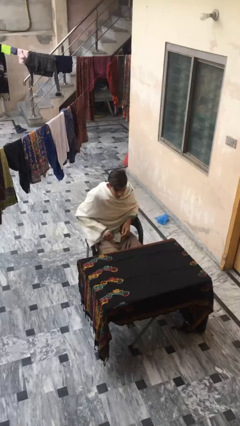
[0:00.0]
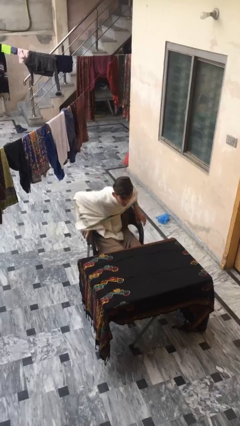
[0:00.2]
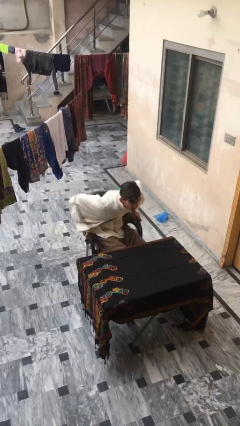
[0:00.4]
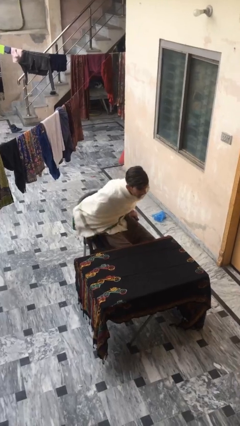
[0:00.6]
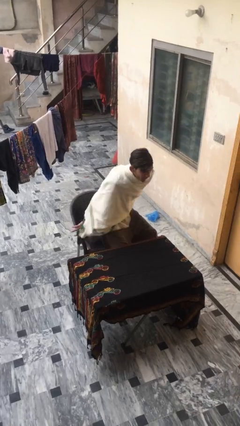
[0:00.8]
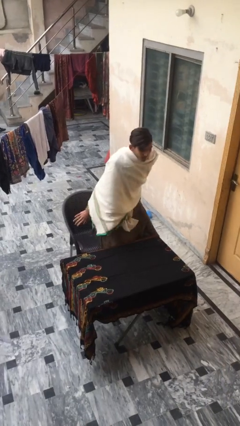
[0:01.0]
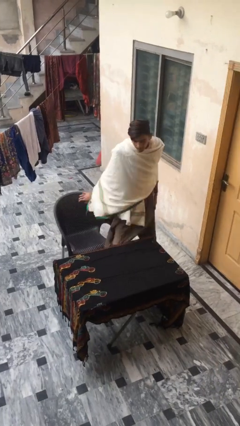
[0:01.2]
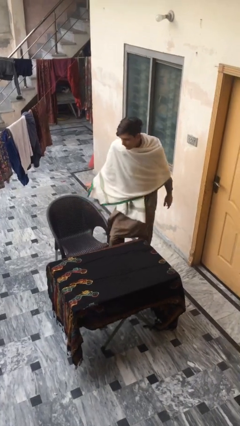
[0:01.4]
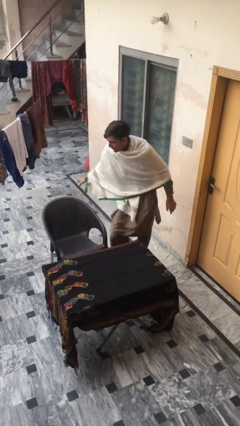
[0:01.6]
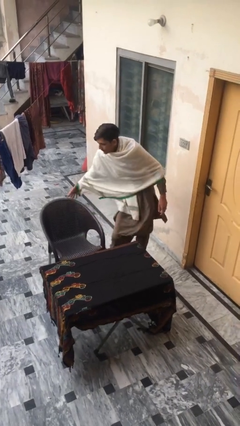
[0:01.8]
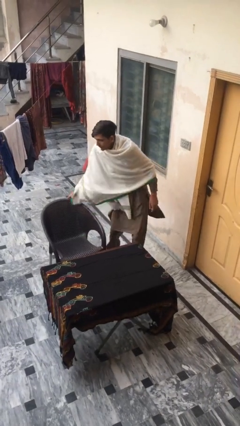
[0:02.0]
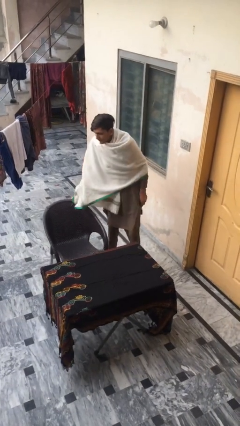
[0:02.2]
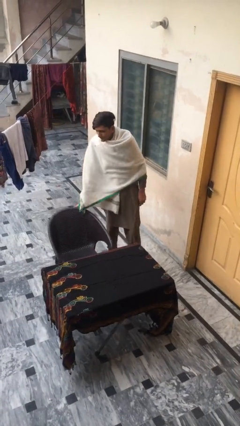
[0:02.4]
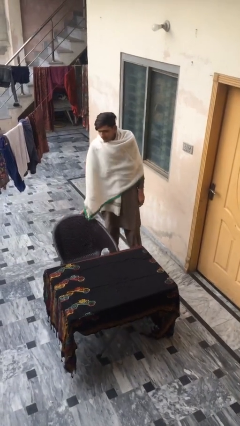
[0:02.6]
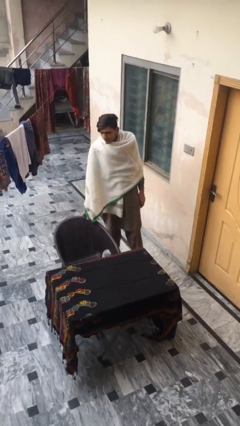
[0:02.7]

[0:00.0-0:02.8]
person stands up

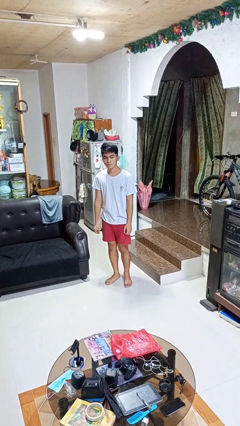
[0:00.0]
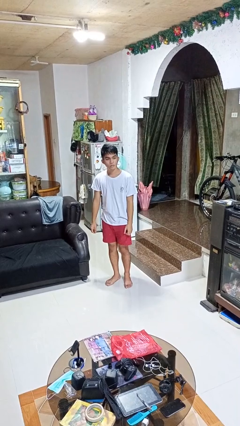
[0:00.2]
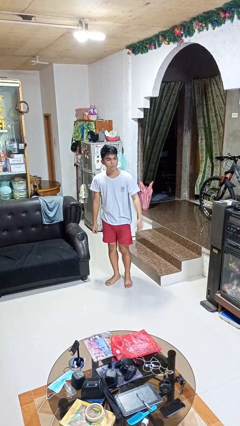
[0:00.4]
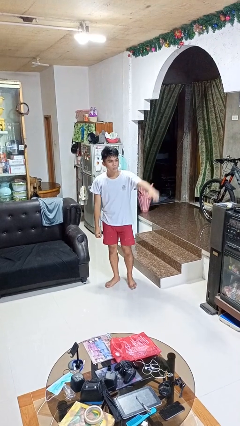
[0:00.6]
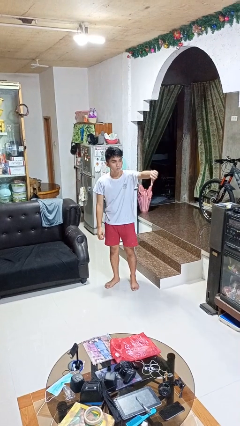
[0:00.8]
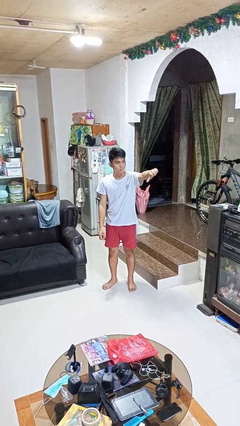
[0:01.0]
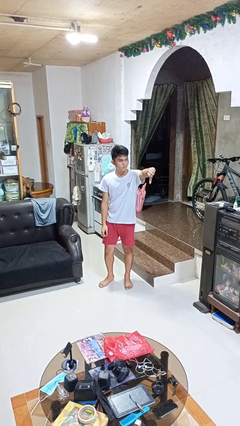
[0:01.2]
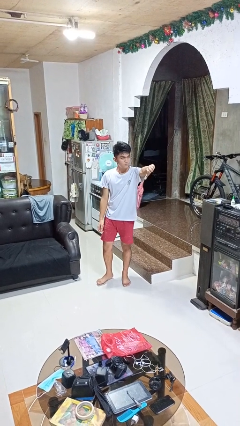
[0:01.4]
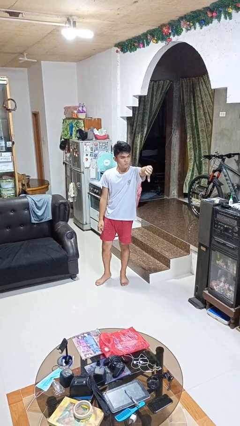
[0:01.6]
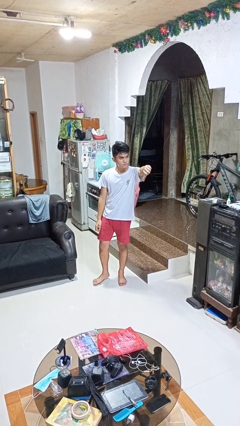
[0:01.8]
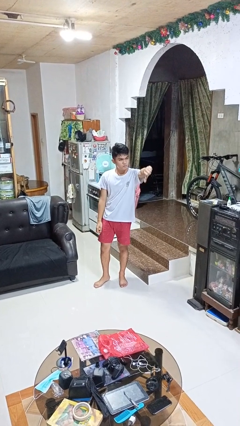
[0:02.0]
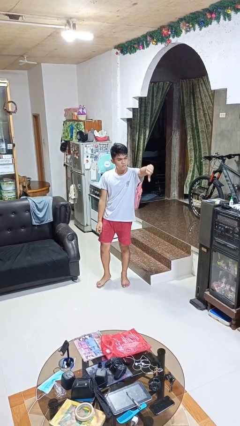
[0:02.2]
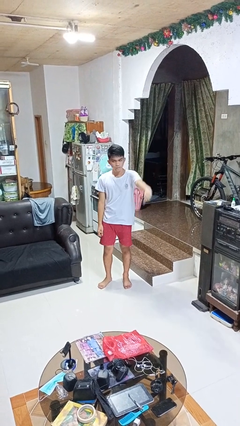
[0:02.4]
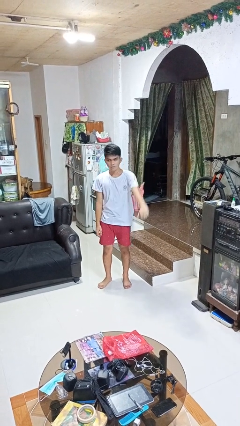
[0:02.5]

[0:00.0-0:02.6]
person gestures thumbs down

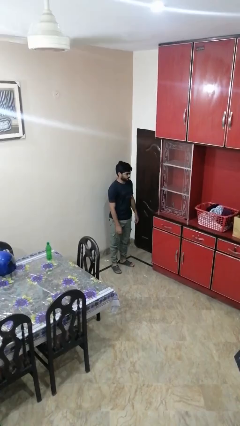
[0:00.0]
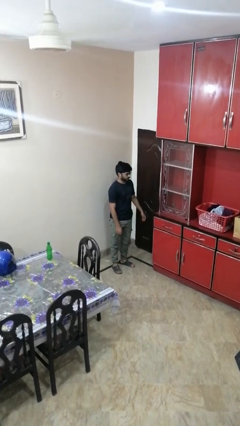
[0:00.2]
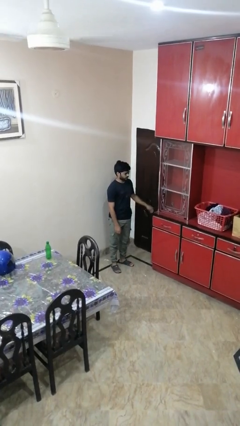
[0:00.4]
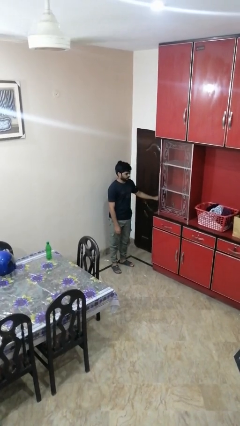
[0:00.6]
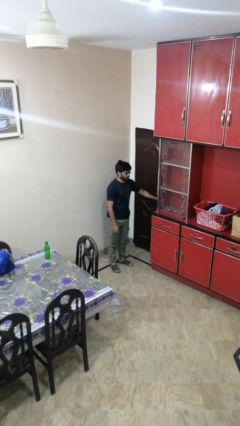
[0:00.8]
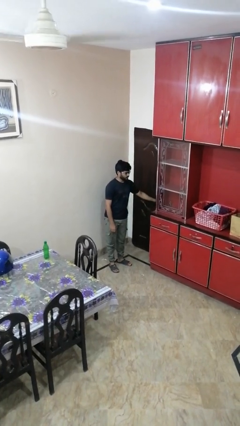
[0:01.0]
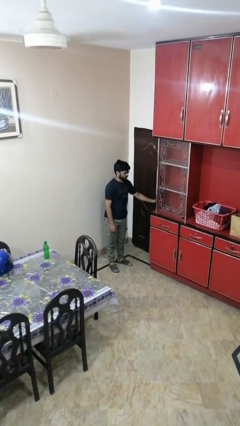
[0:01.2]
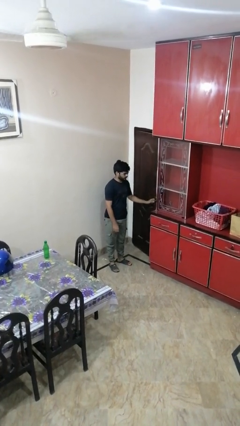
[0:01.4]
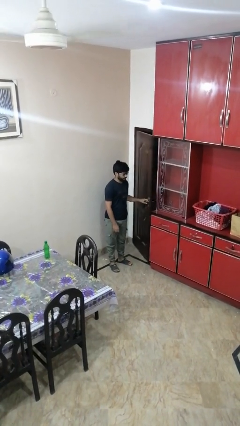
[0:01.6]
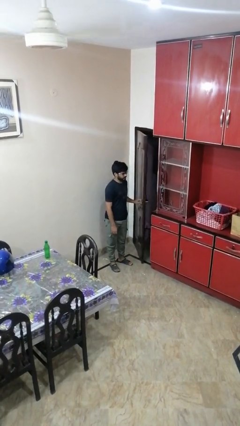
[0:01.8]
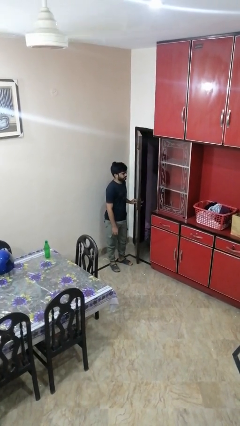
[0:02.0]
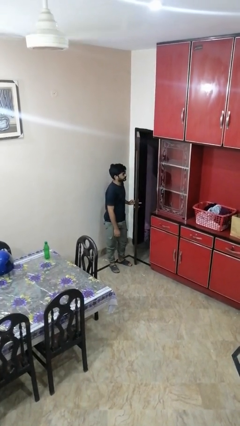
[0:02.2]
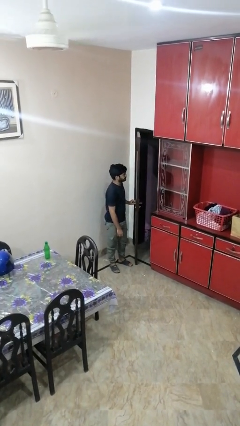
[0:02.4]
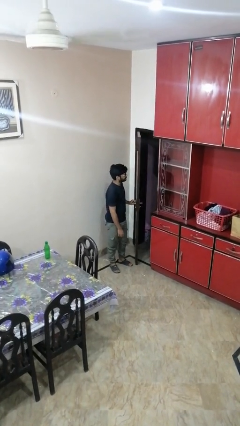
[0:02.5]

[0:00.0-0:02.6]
person opens facility door

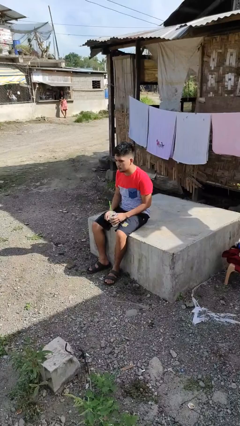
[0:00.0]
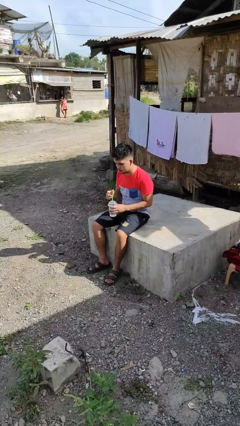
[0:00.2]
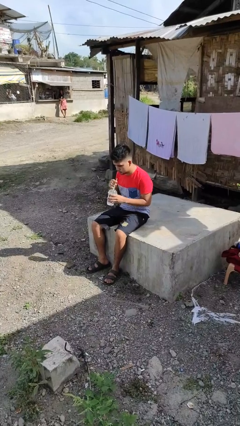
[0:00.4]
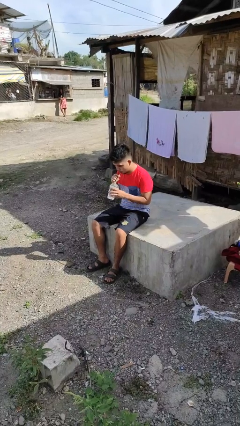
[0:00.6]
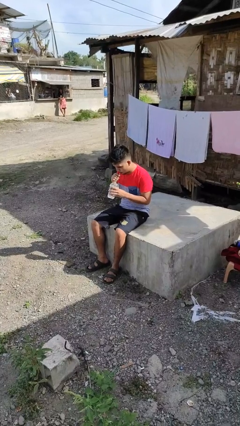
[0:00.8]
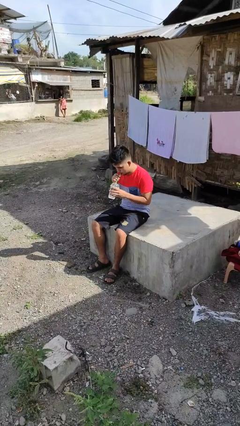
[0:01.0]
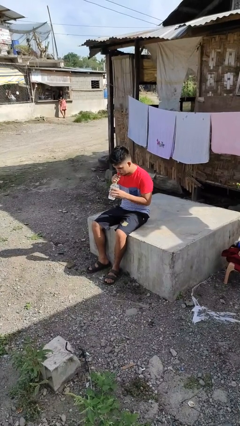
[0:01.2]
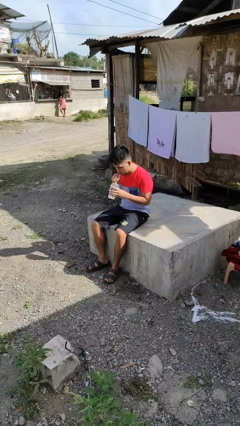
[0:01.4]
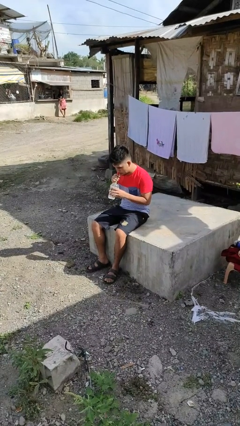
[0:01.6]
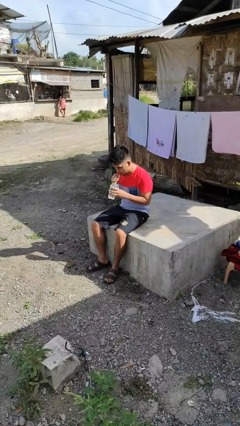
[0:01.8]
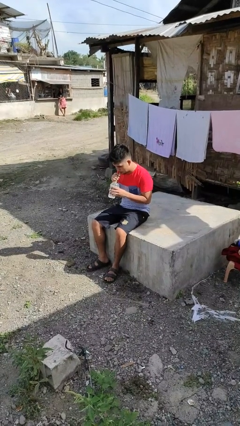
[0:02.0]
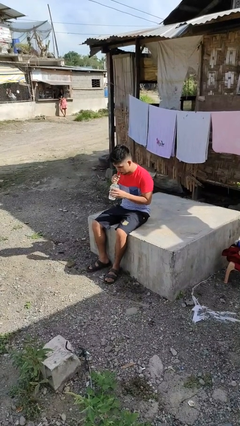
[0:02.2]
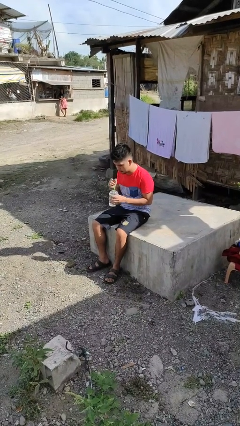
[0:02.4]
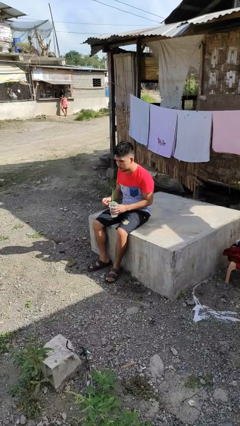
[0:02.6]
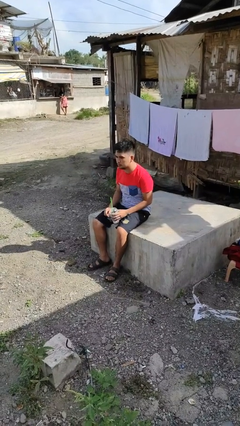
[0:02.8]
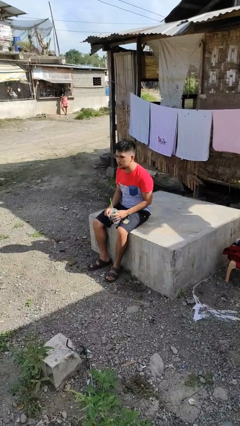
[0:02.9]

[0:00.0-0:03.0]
person drinks from straw

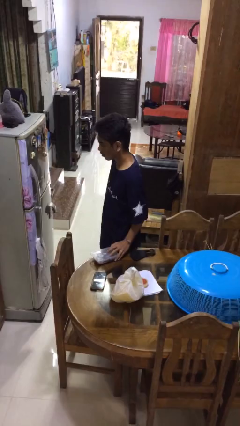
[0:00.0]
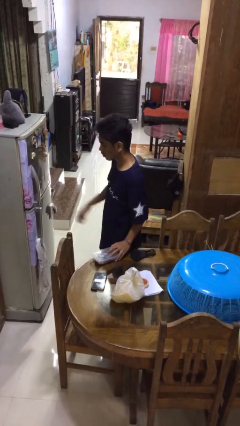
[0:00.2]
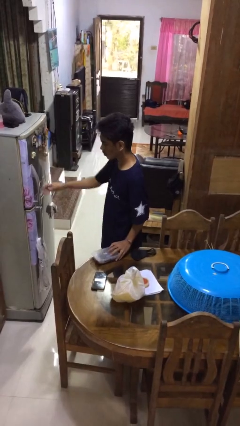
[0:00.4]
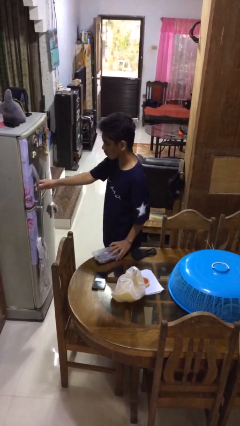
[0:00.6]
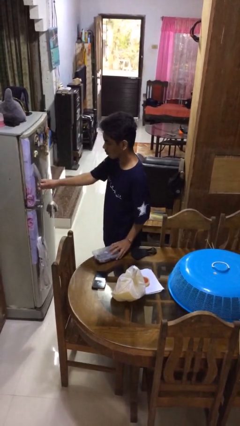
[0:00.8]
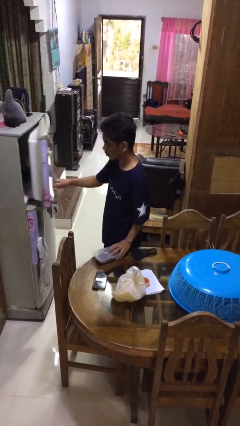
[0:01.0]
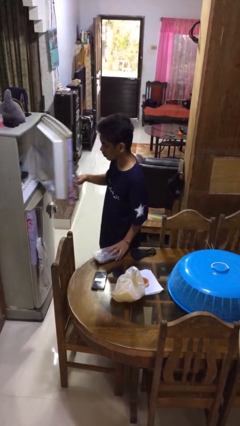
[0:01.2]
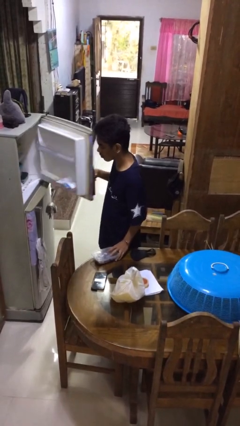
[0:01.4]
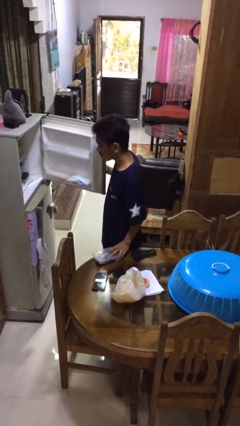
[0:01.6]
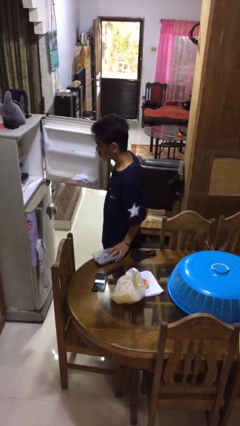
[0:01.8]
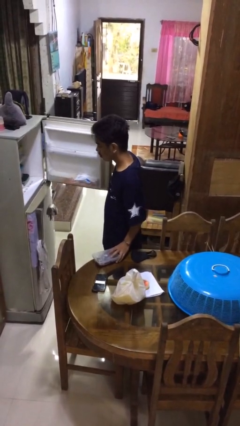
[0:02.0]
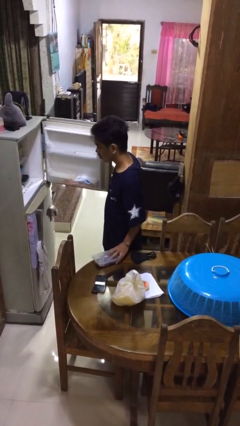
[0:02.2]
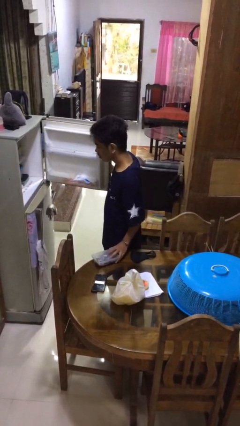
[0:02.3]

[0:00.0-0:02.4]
person opens refrigerator

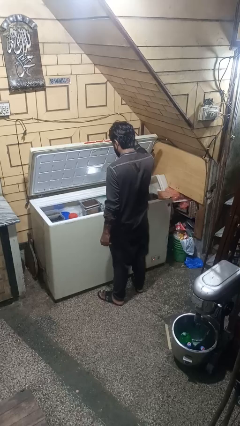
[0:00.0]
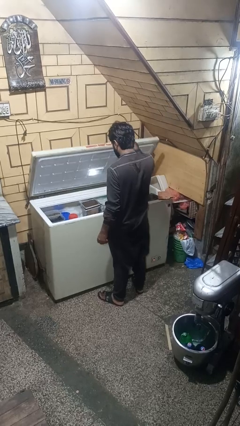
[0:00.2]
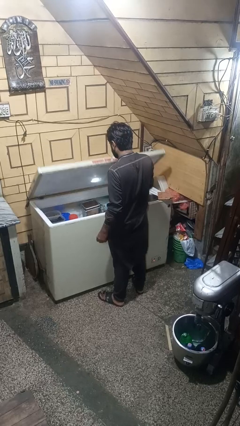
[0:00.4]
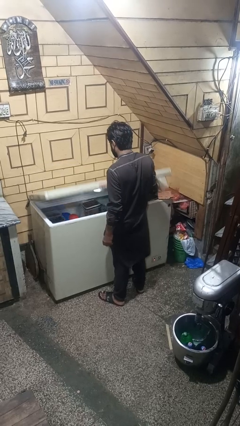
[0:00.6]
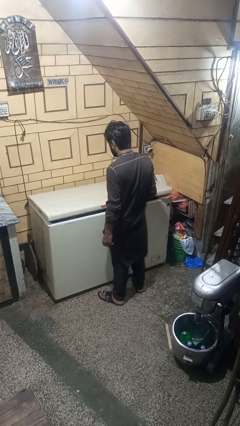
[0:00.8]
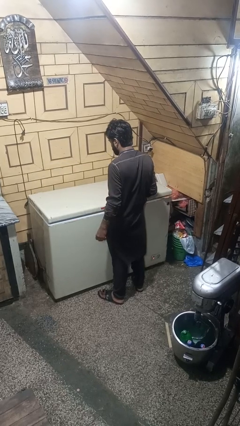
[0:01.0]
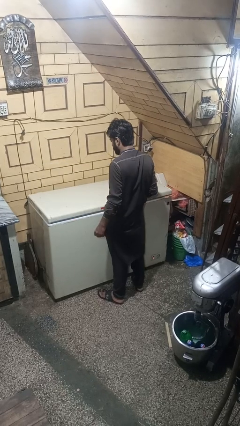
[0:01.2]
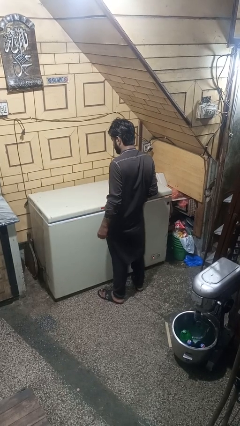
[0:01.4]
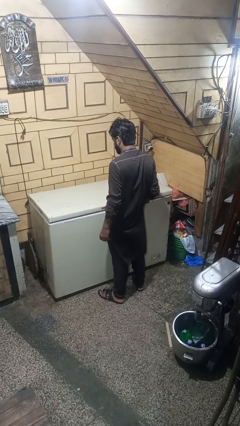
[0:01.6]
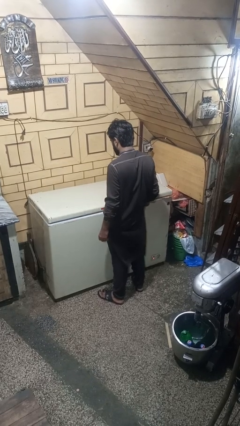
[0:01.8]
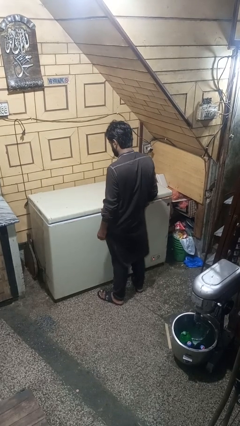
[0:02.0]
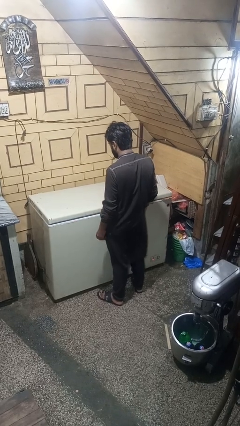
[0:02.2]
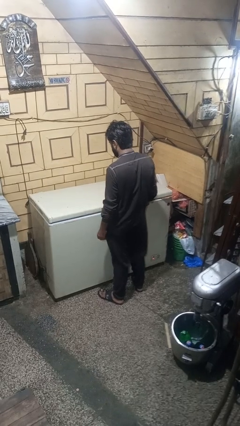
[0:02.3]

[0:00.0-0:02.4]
person closes refrigerator

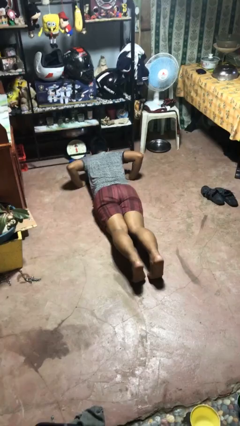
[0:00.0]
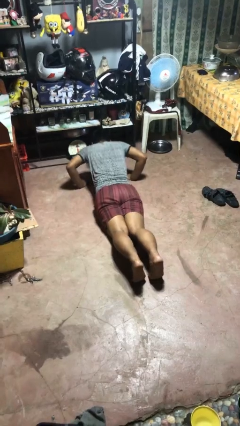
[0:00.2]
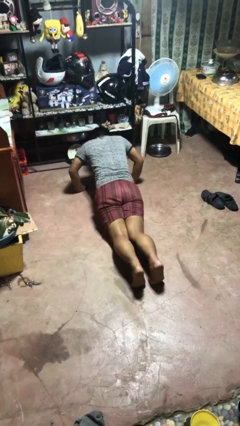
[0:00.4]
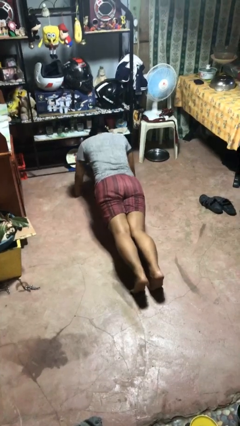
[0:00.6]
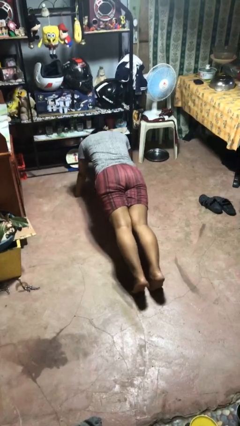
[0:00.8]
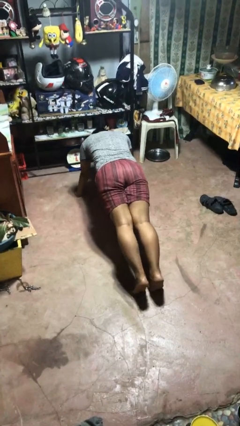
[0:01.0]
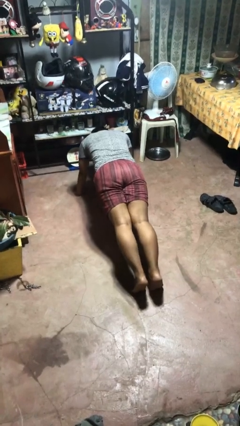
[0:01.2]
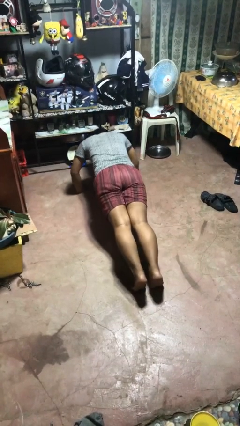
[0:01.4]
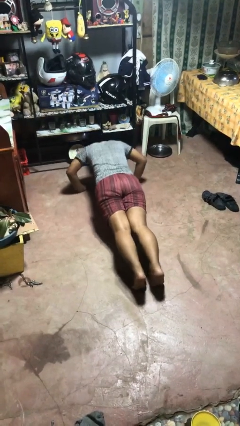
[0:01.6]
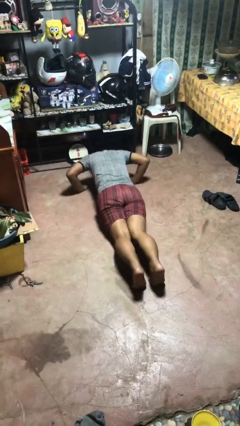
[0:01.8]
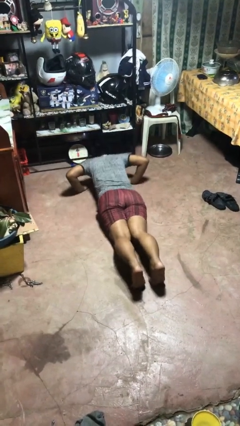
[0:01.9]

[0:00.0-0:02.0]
person exercises with pushup
